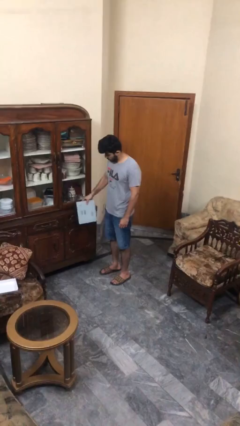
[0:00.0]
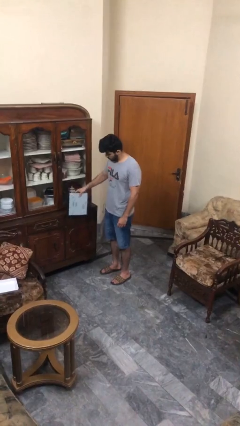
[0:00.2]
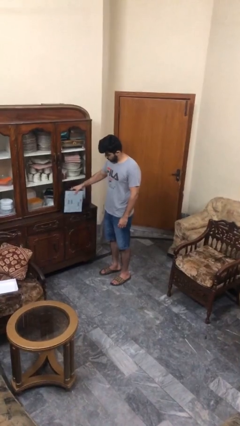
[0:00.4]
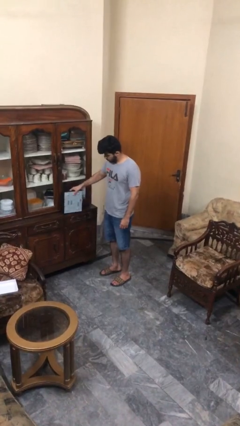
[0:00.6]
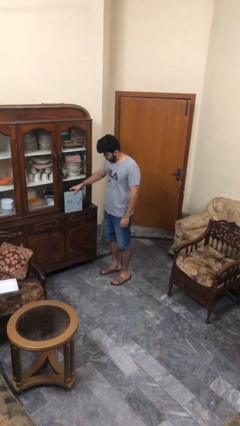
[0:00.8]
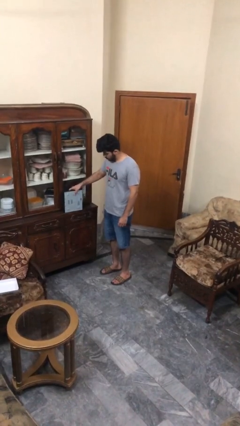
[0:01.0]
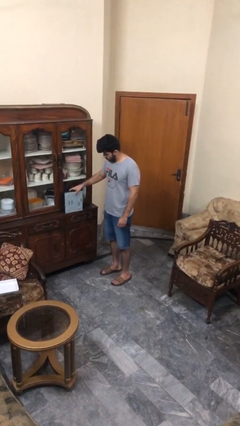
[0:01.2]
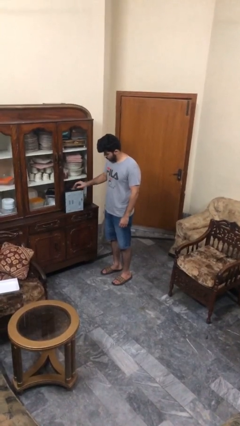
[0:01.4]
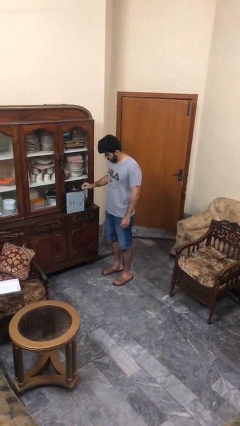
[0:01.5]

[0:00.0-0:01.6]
person puts down object on countertop

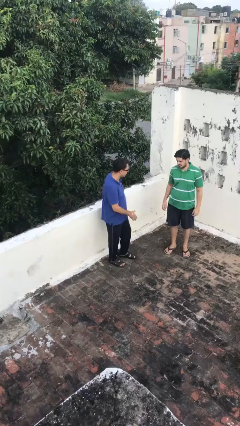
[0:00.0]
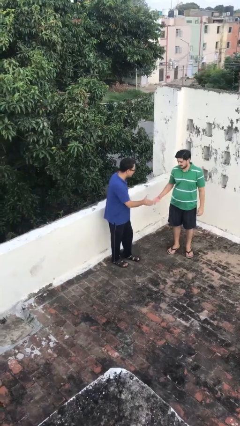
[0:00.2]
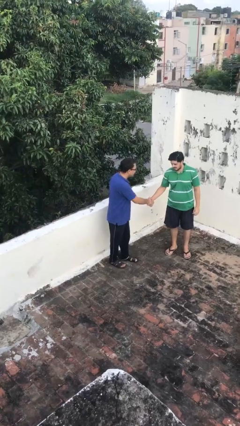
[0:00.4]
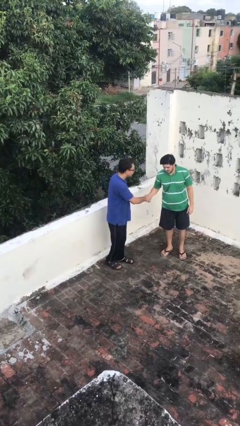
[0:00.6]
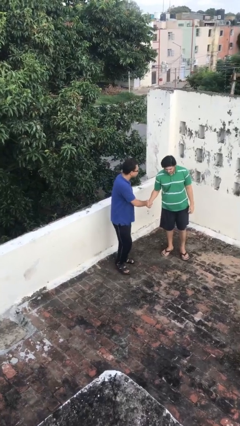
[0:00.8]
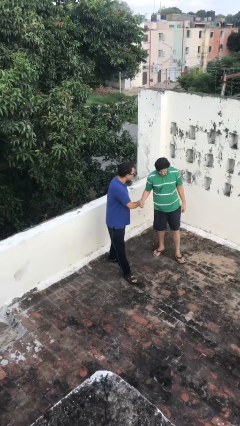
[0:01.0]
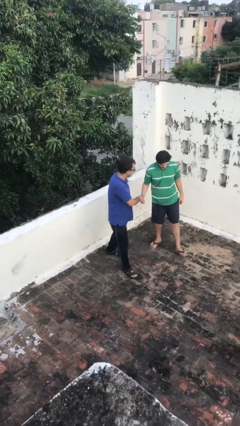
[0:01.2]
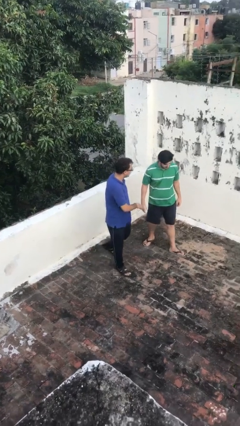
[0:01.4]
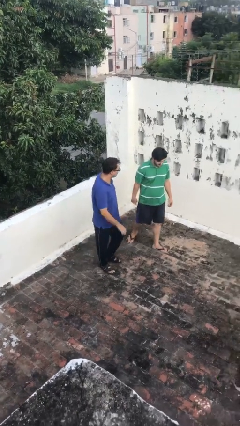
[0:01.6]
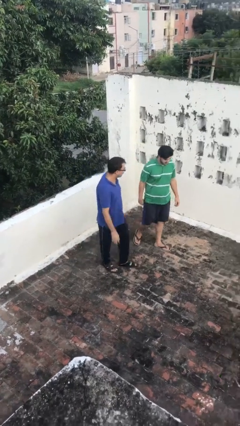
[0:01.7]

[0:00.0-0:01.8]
person shakes hand

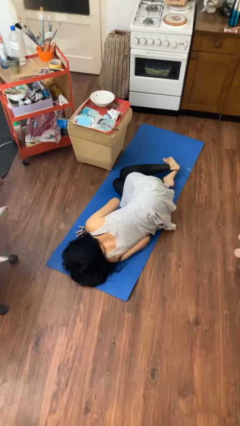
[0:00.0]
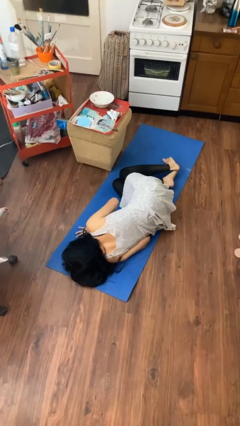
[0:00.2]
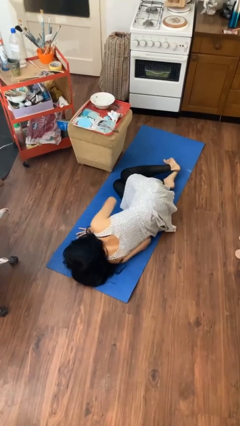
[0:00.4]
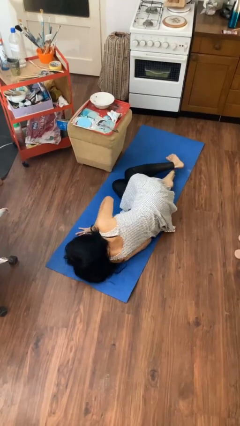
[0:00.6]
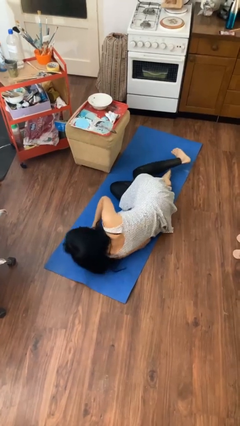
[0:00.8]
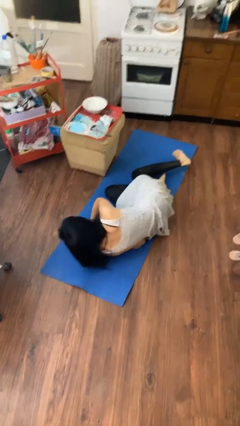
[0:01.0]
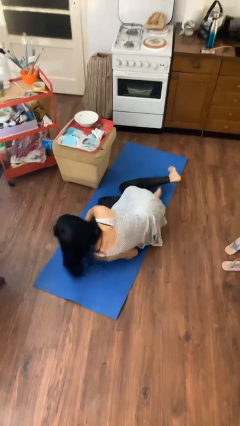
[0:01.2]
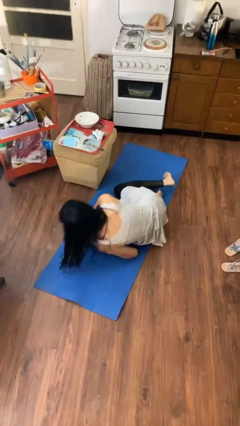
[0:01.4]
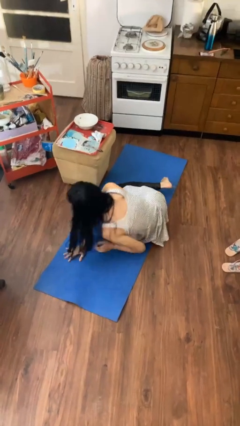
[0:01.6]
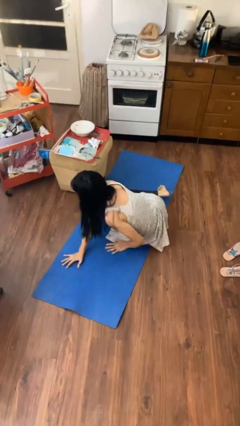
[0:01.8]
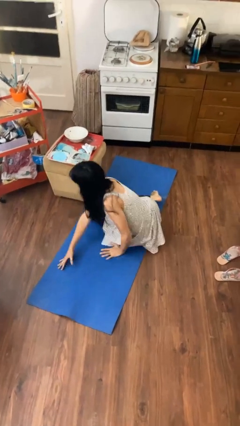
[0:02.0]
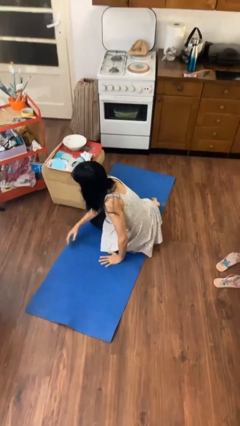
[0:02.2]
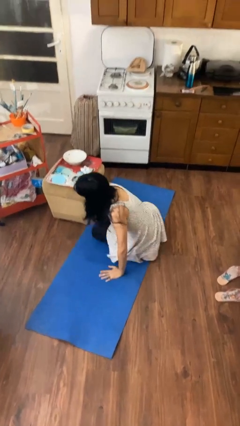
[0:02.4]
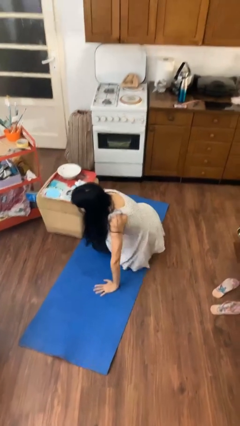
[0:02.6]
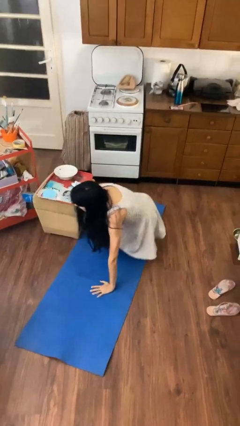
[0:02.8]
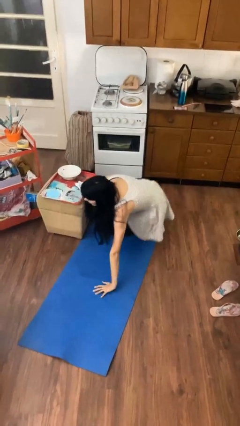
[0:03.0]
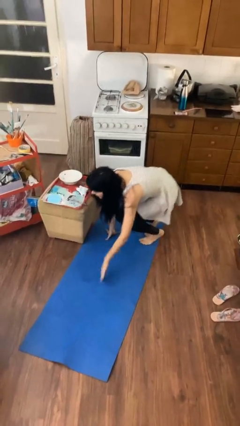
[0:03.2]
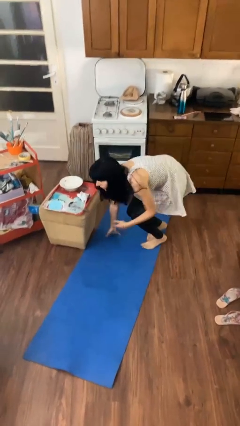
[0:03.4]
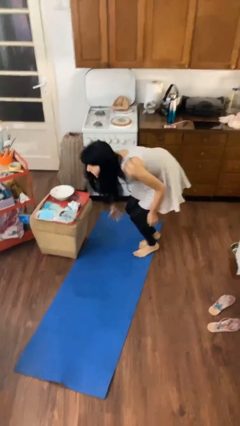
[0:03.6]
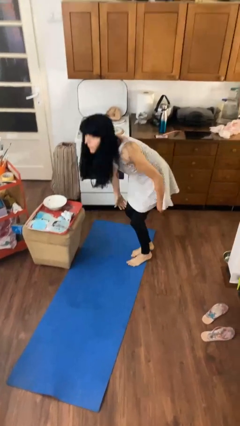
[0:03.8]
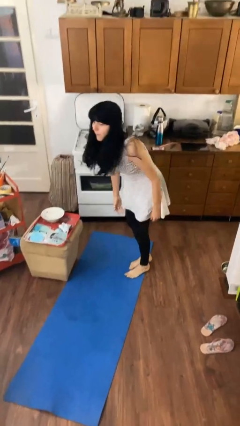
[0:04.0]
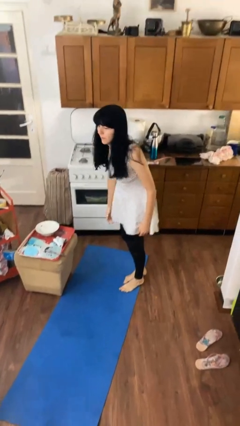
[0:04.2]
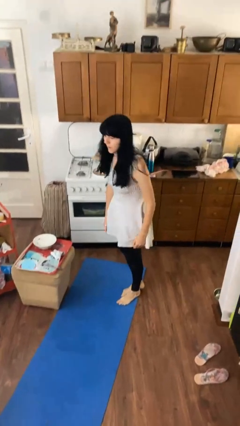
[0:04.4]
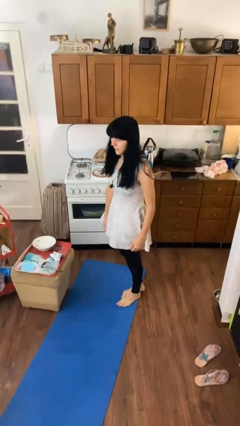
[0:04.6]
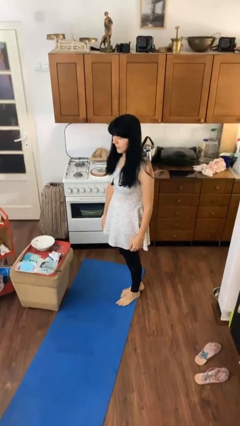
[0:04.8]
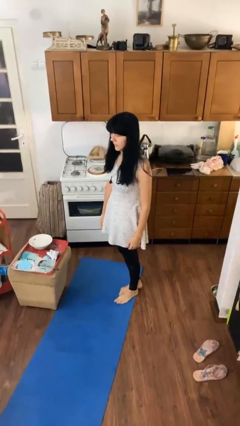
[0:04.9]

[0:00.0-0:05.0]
person stands up from floor

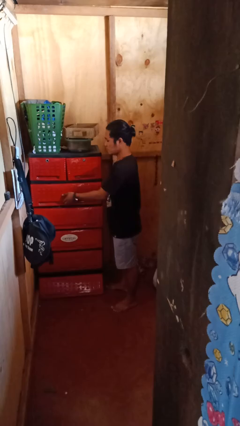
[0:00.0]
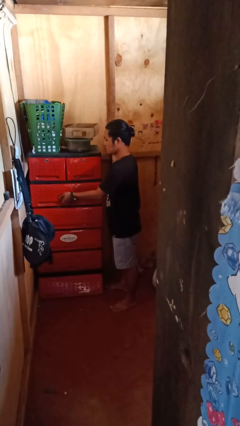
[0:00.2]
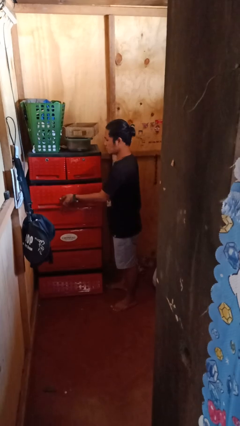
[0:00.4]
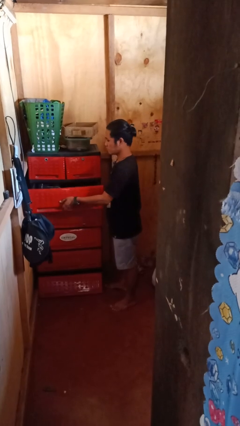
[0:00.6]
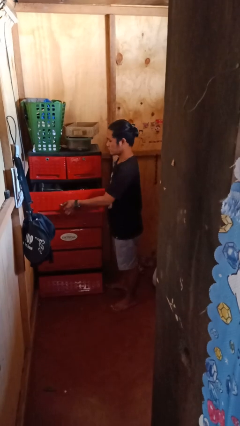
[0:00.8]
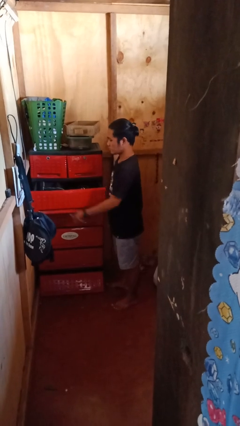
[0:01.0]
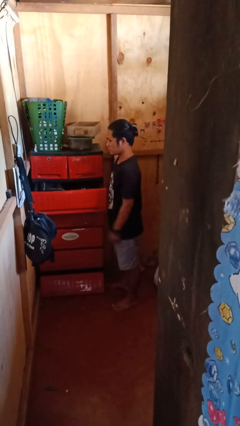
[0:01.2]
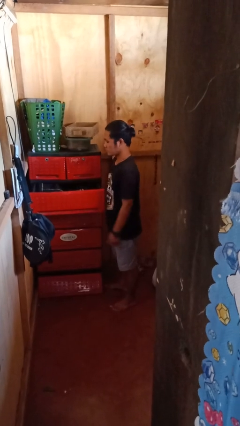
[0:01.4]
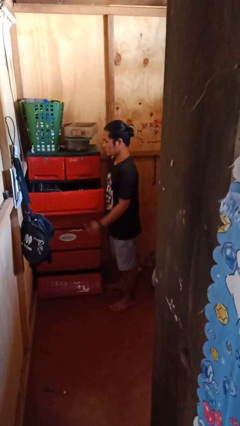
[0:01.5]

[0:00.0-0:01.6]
person opens dresser drawer

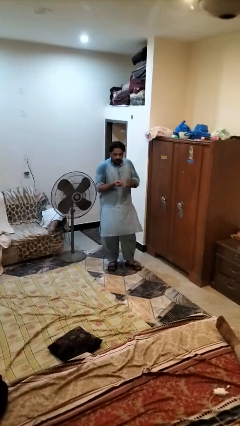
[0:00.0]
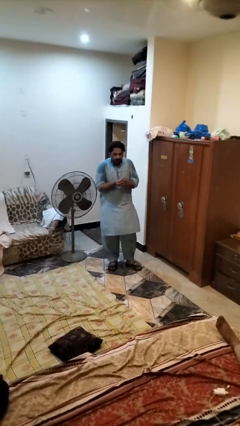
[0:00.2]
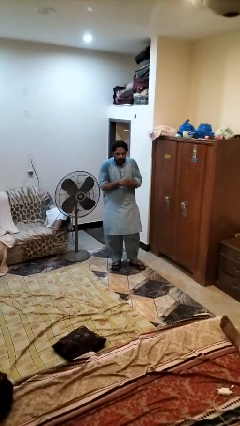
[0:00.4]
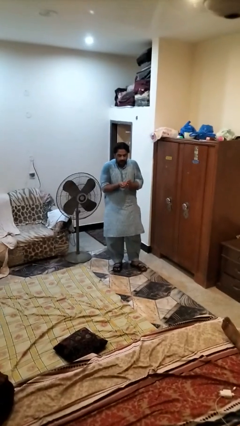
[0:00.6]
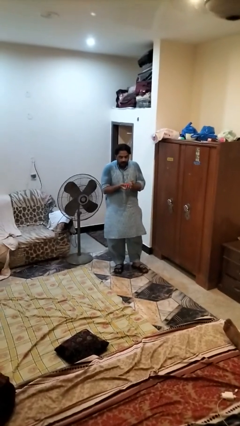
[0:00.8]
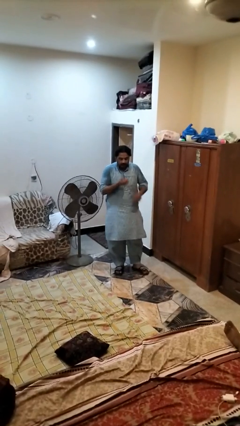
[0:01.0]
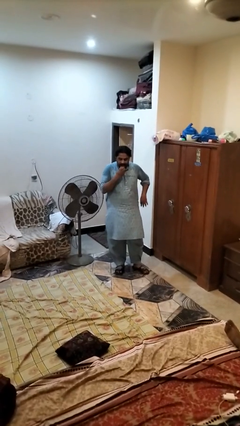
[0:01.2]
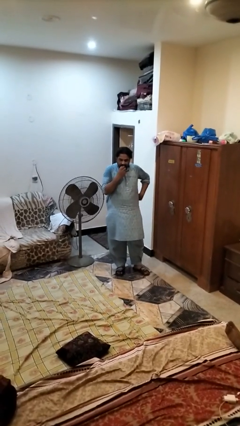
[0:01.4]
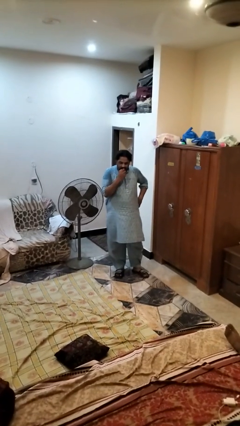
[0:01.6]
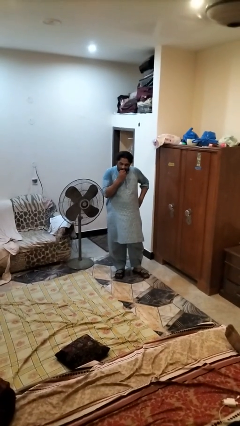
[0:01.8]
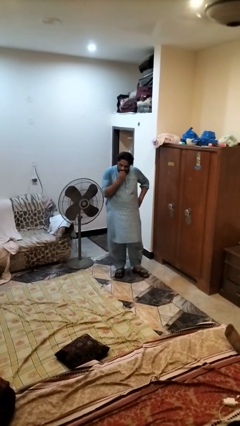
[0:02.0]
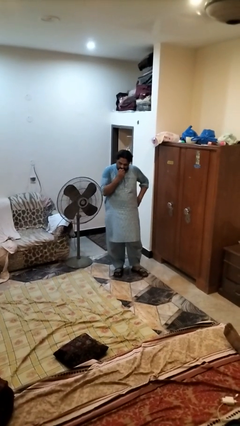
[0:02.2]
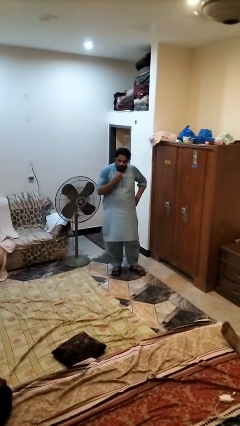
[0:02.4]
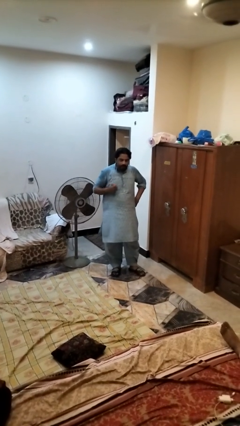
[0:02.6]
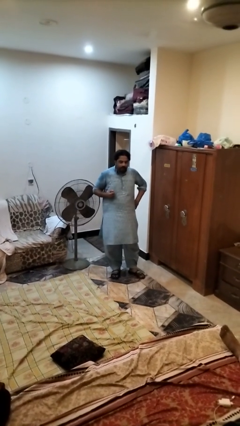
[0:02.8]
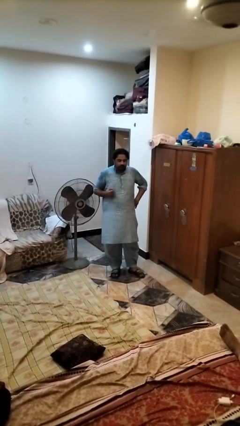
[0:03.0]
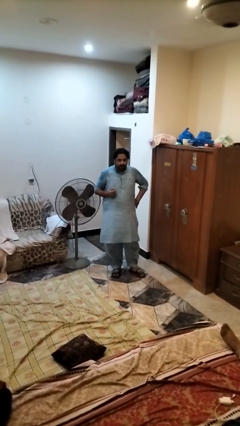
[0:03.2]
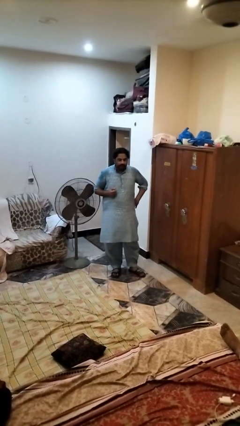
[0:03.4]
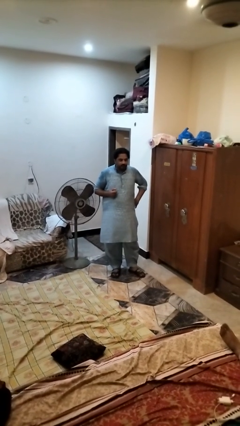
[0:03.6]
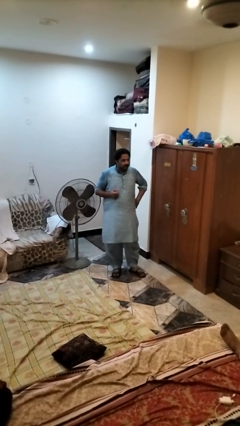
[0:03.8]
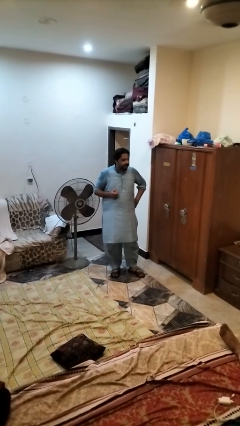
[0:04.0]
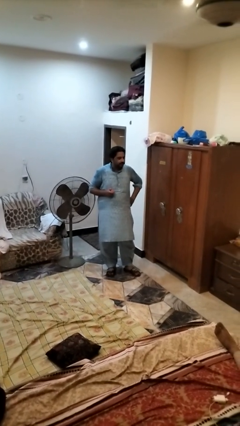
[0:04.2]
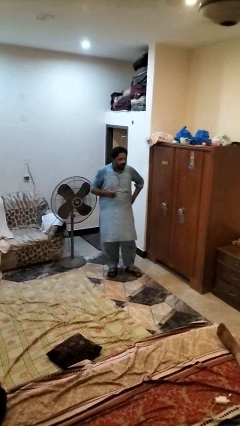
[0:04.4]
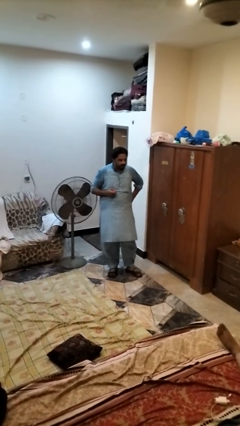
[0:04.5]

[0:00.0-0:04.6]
person eats apple

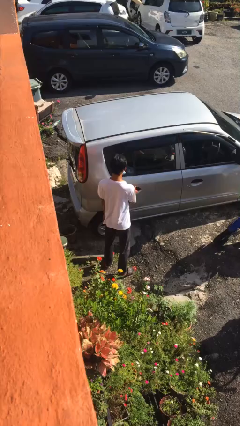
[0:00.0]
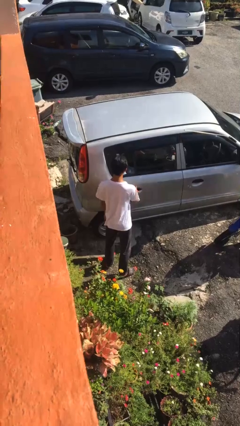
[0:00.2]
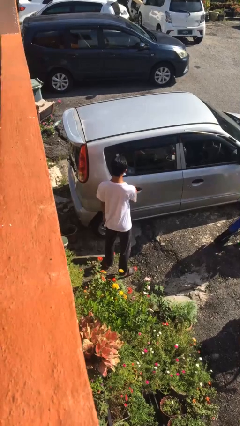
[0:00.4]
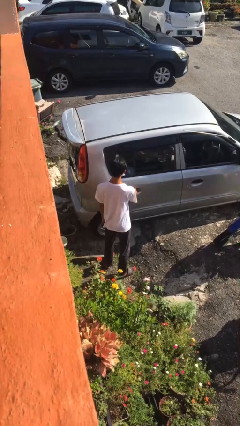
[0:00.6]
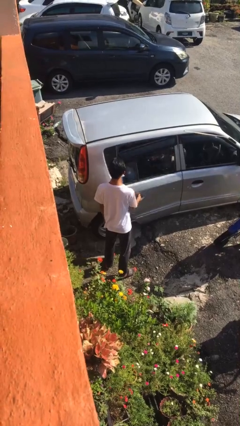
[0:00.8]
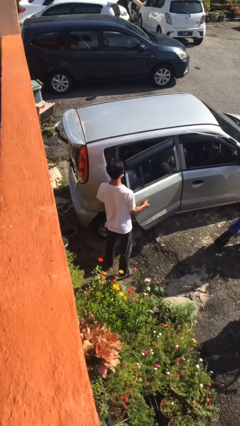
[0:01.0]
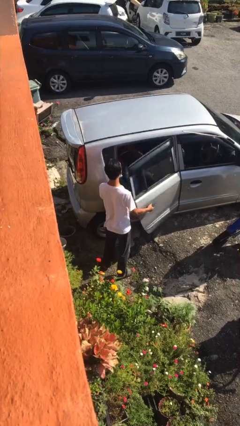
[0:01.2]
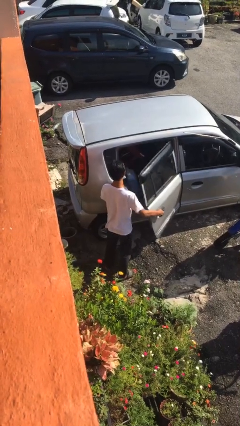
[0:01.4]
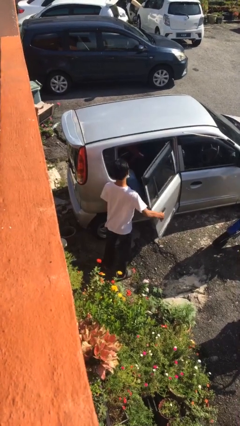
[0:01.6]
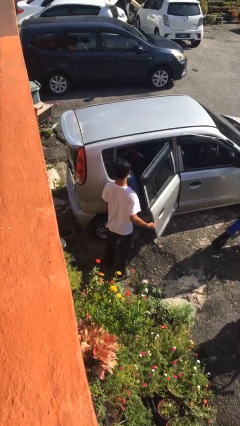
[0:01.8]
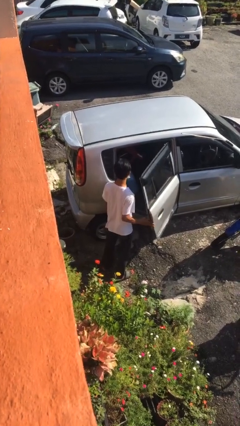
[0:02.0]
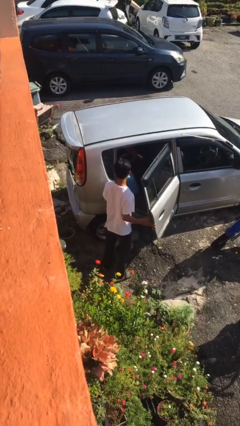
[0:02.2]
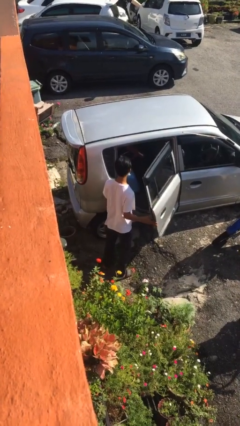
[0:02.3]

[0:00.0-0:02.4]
person opens car door
